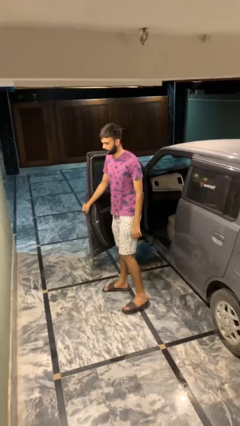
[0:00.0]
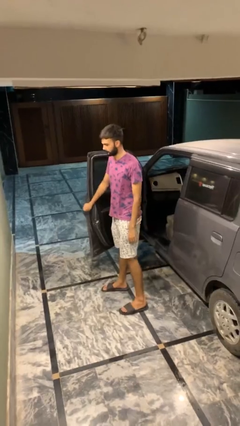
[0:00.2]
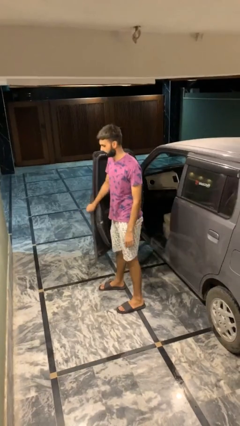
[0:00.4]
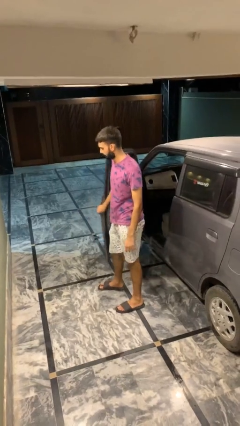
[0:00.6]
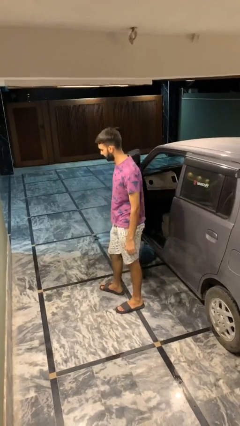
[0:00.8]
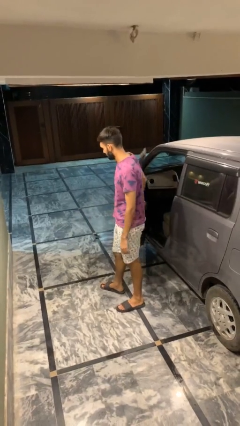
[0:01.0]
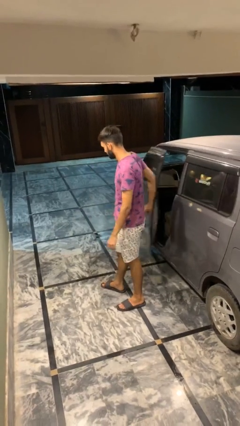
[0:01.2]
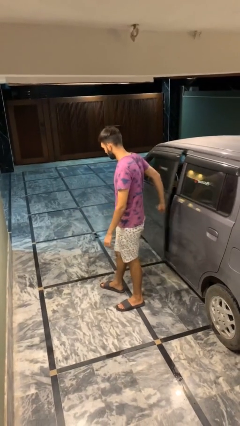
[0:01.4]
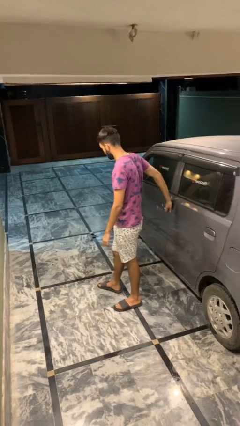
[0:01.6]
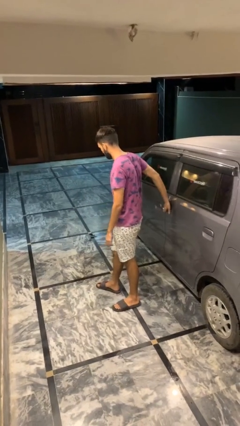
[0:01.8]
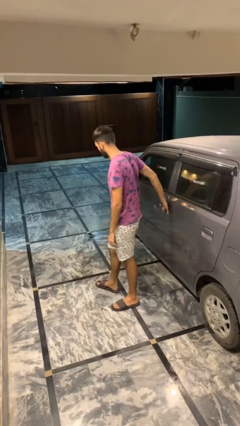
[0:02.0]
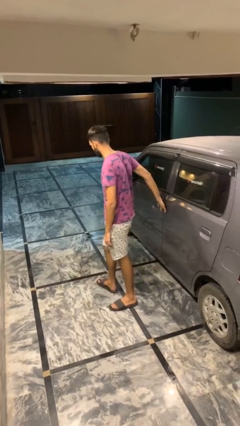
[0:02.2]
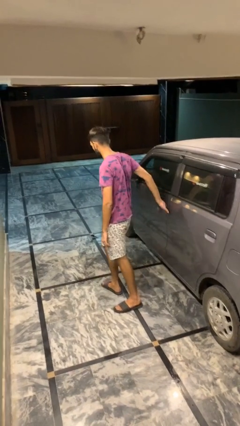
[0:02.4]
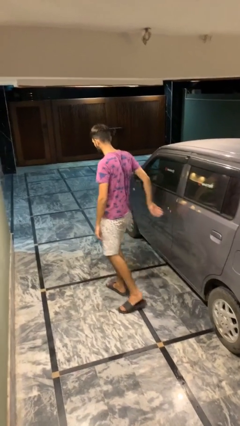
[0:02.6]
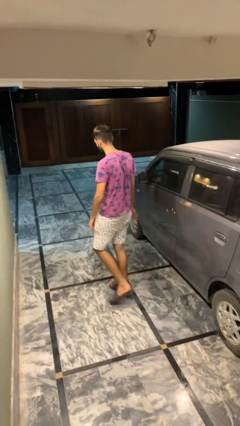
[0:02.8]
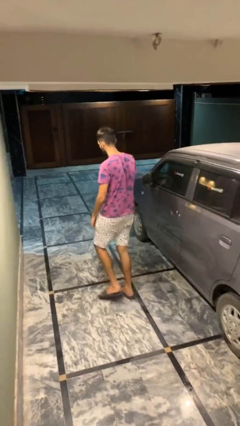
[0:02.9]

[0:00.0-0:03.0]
person closes car door

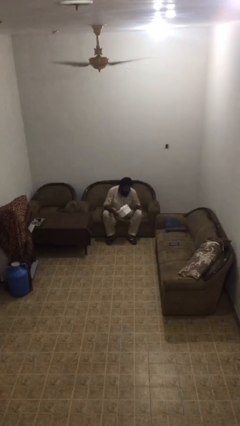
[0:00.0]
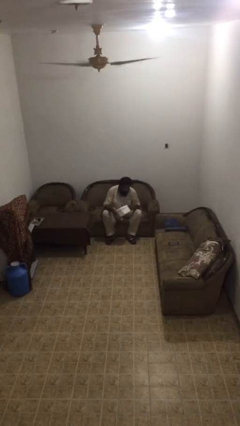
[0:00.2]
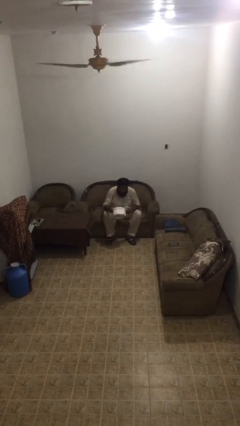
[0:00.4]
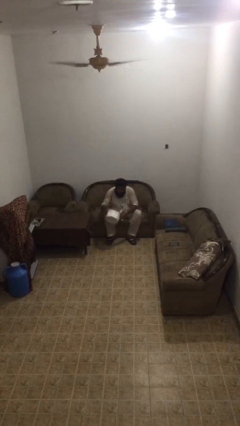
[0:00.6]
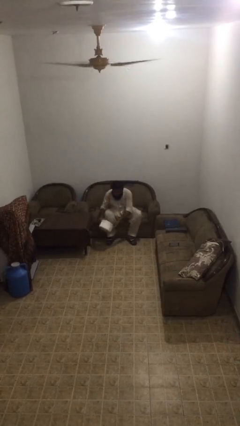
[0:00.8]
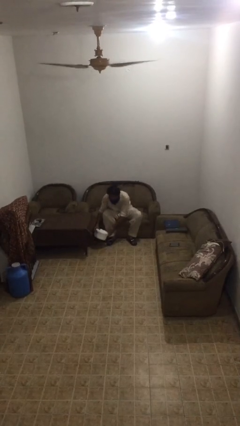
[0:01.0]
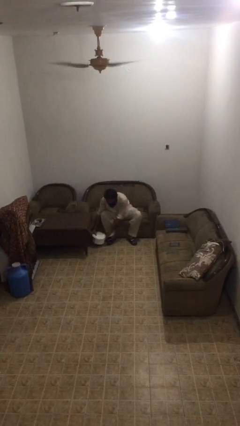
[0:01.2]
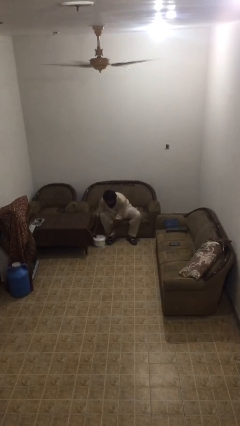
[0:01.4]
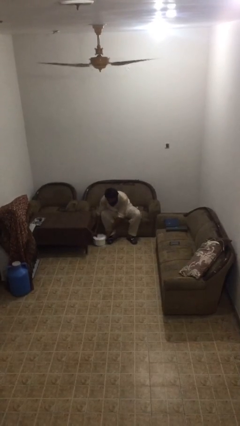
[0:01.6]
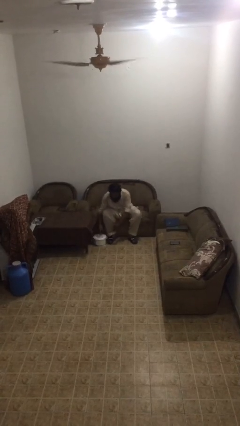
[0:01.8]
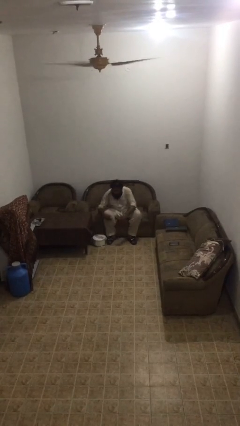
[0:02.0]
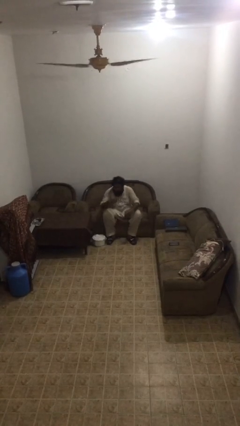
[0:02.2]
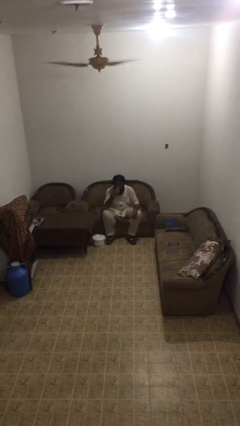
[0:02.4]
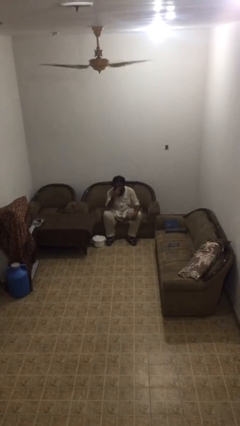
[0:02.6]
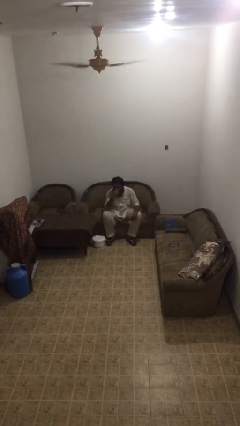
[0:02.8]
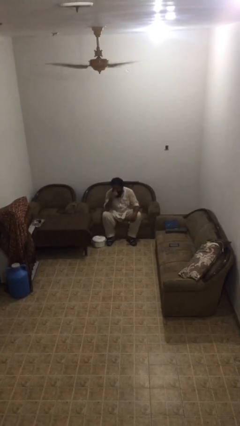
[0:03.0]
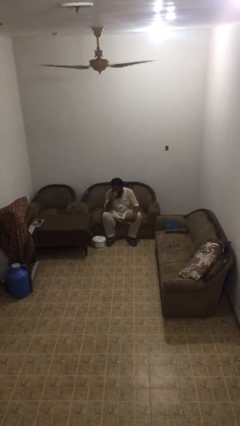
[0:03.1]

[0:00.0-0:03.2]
person puts down object on floor

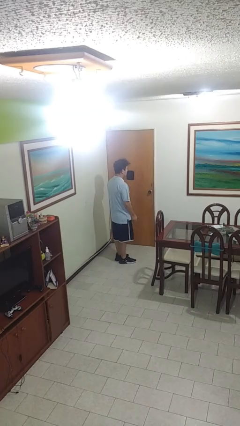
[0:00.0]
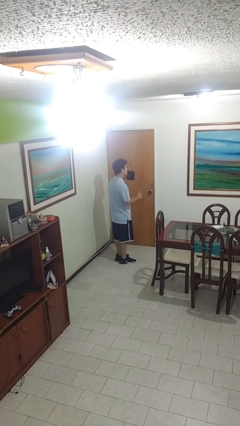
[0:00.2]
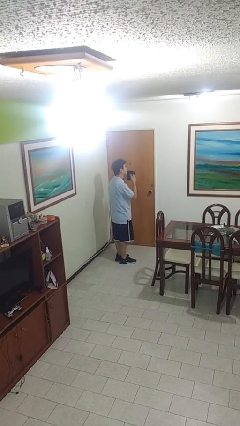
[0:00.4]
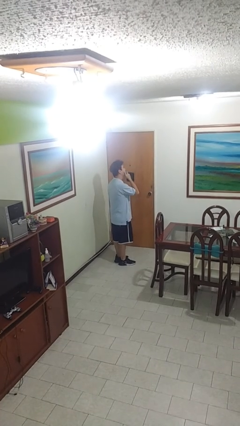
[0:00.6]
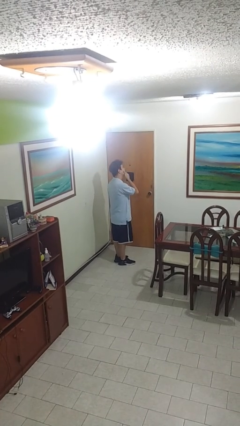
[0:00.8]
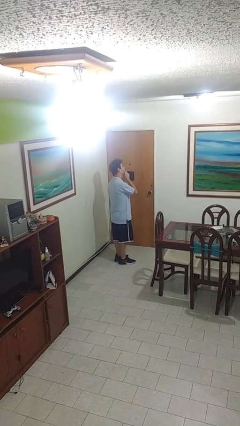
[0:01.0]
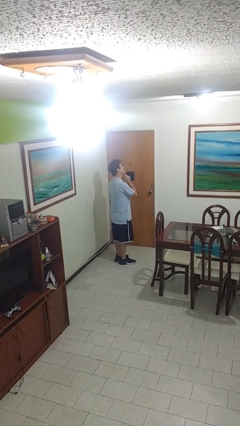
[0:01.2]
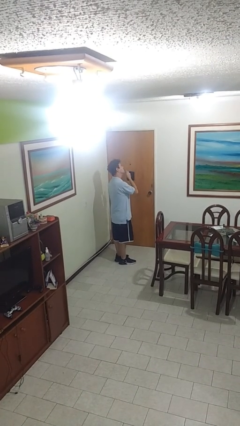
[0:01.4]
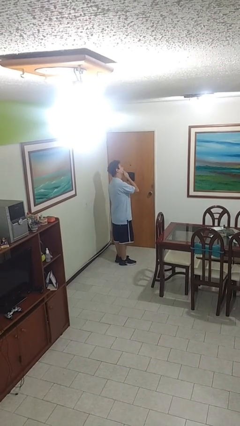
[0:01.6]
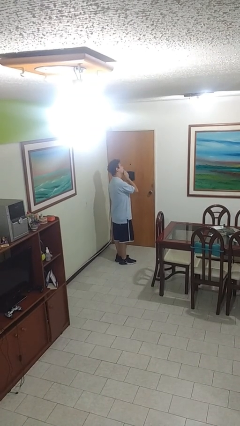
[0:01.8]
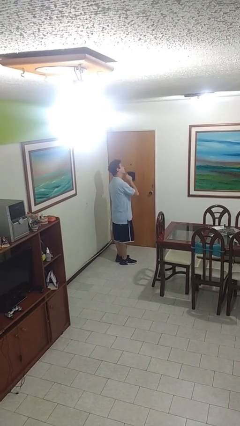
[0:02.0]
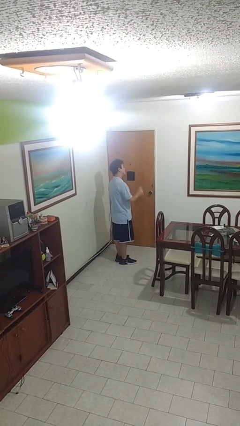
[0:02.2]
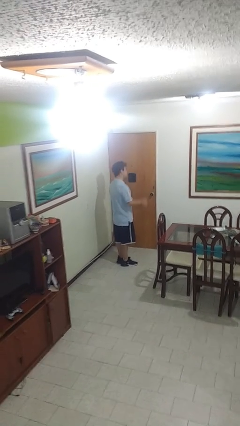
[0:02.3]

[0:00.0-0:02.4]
person strokes chin

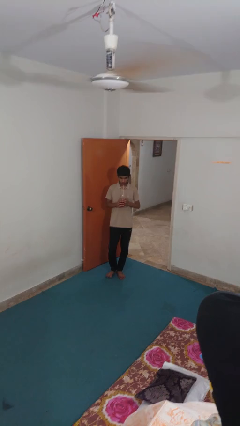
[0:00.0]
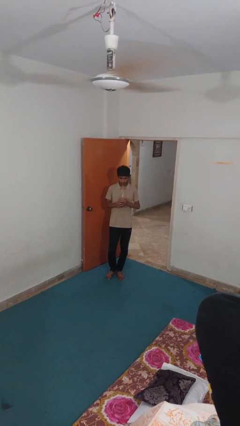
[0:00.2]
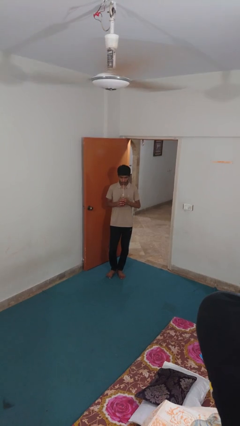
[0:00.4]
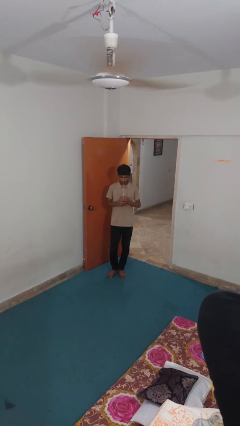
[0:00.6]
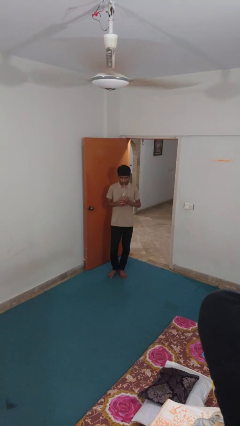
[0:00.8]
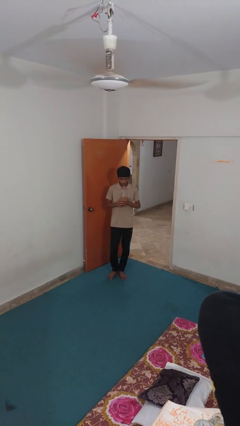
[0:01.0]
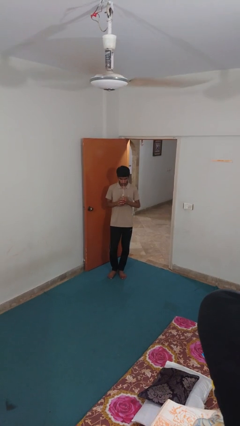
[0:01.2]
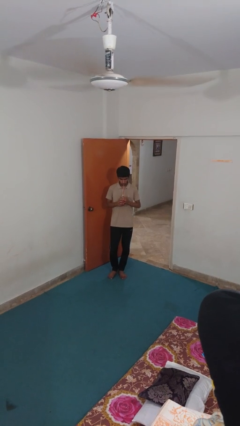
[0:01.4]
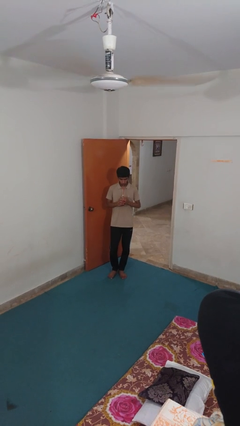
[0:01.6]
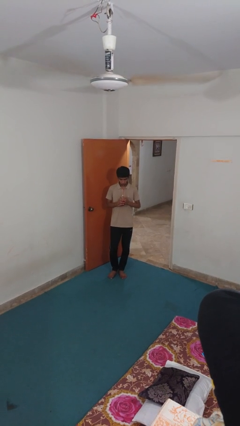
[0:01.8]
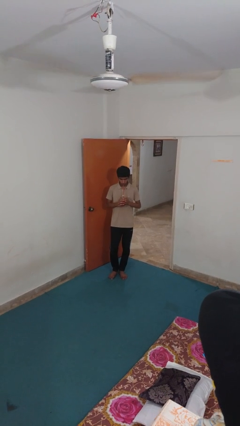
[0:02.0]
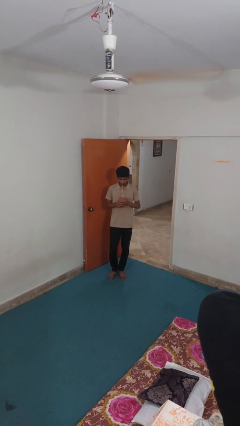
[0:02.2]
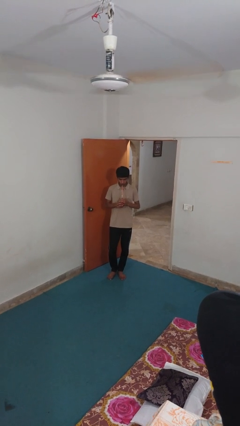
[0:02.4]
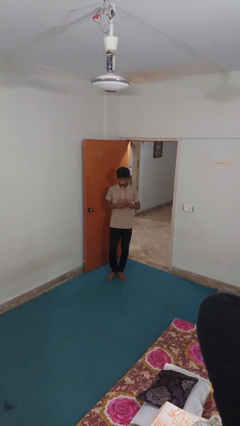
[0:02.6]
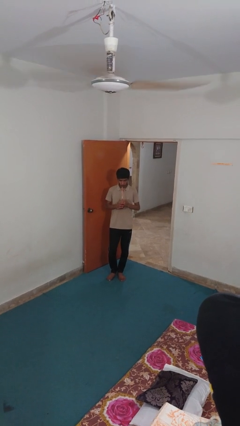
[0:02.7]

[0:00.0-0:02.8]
person drinks from straw

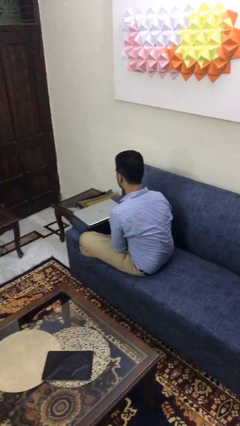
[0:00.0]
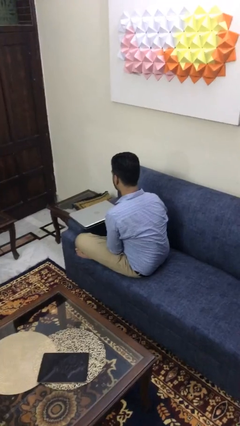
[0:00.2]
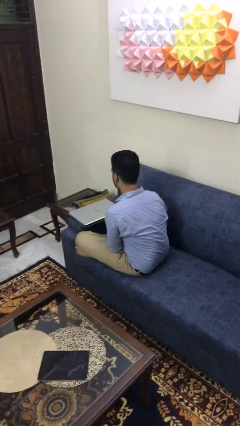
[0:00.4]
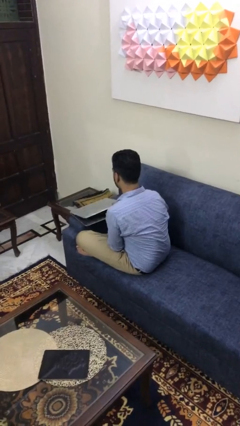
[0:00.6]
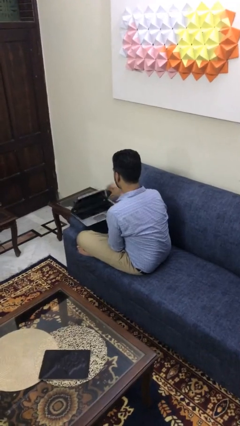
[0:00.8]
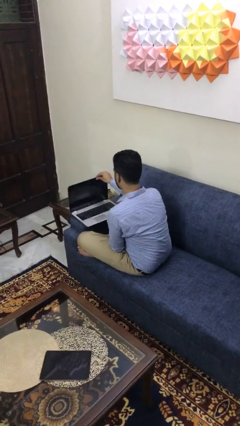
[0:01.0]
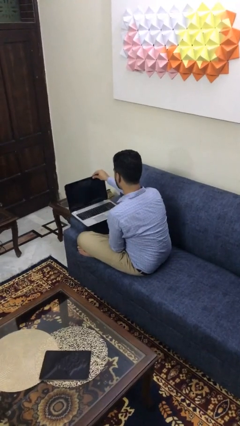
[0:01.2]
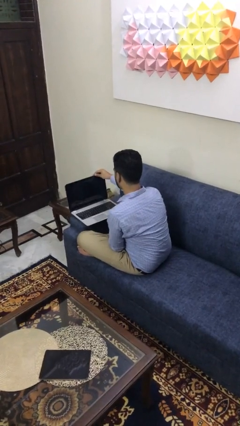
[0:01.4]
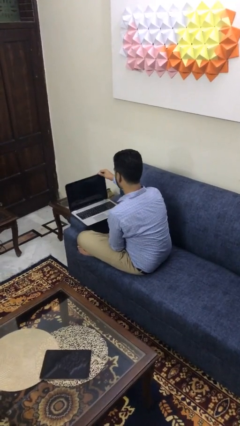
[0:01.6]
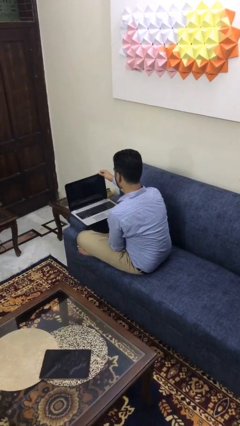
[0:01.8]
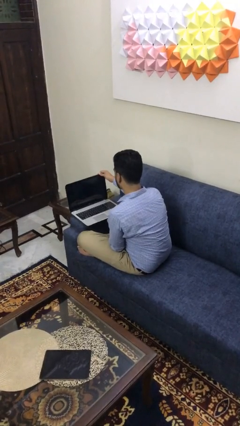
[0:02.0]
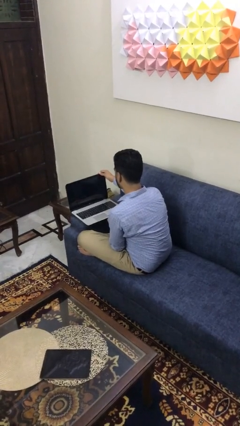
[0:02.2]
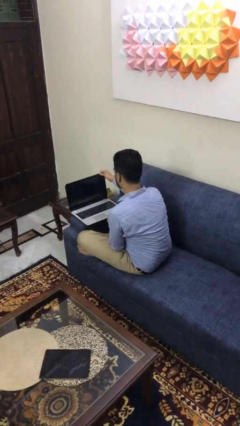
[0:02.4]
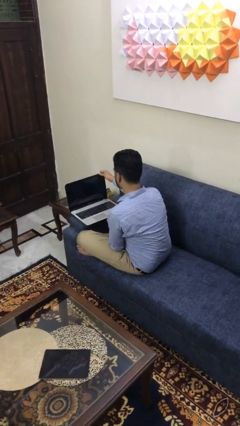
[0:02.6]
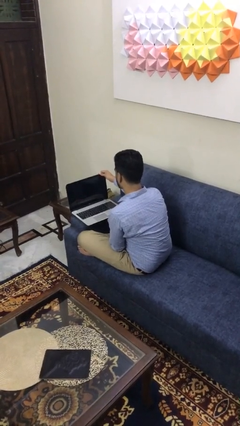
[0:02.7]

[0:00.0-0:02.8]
person opens laptop

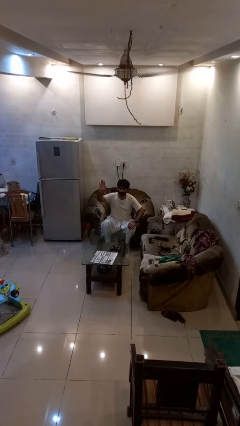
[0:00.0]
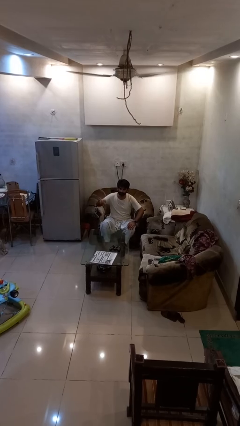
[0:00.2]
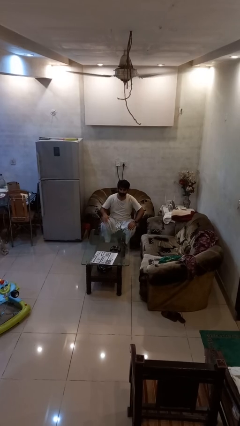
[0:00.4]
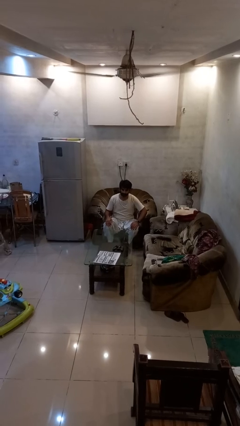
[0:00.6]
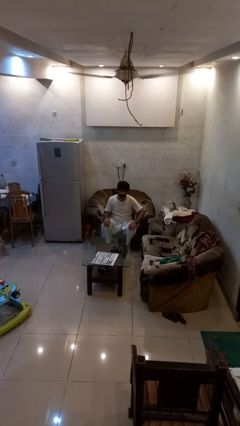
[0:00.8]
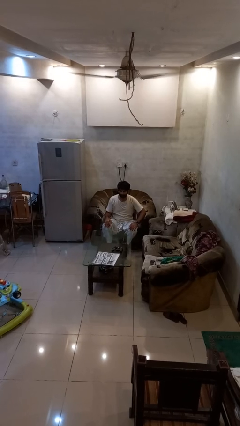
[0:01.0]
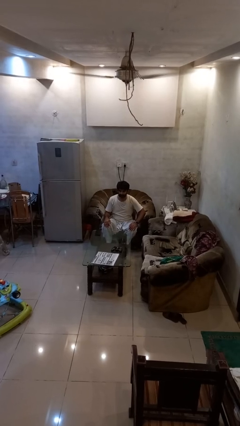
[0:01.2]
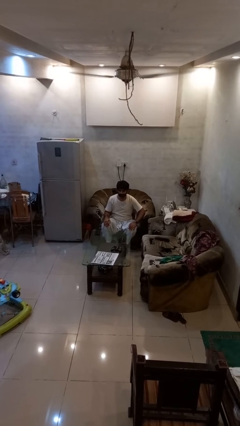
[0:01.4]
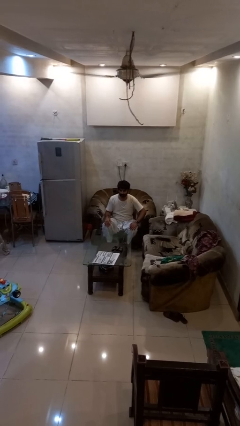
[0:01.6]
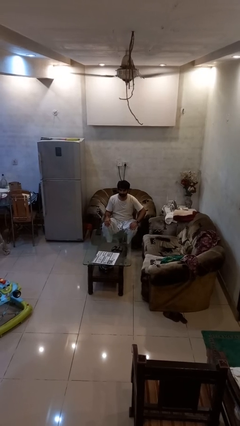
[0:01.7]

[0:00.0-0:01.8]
person gestures lower hand

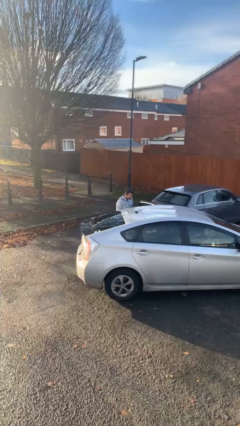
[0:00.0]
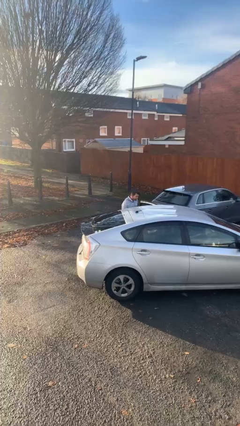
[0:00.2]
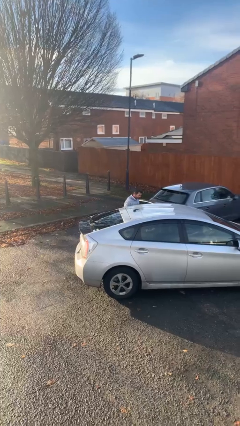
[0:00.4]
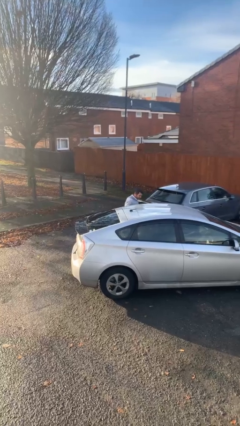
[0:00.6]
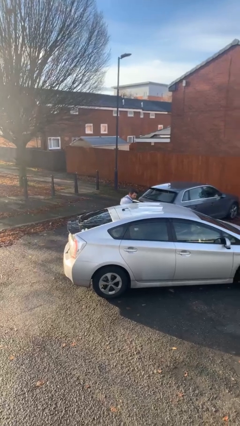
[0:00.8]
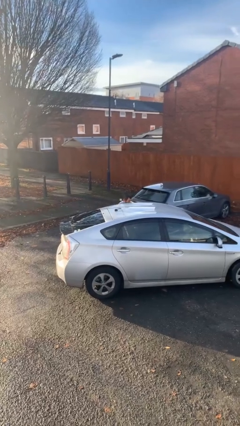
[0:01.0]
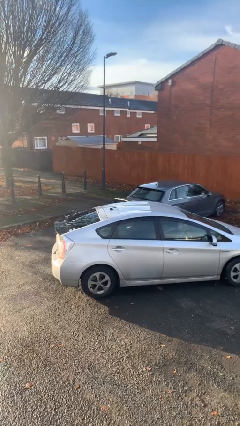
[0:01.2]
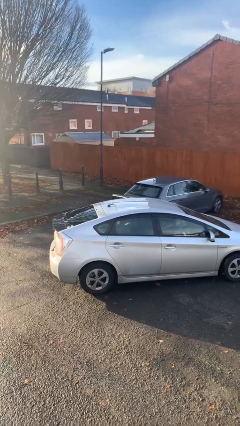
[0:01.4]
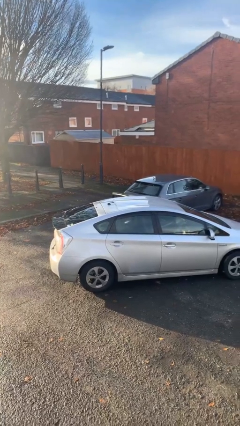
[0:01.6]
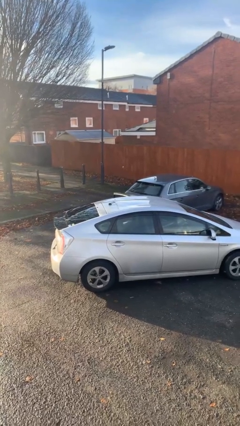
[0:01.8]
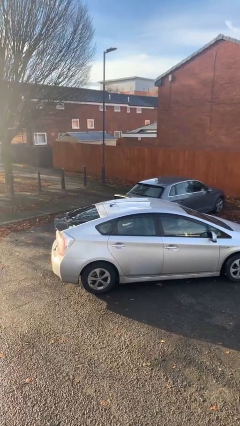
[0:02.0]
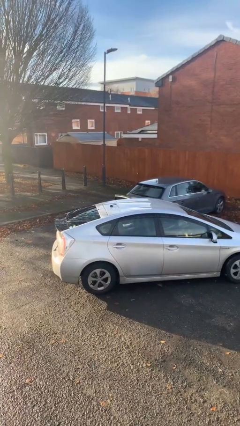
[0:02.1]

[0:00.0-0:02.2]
person enters car
